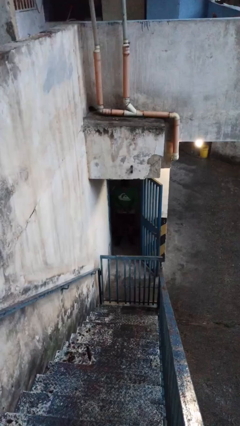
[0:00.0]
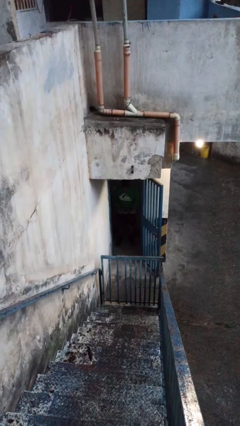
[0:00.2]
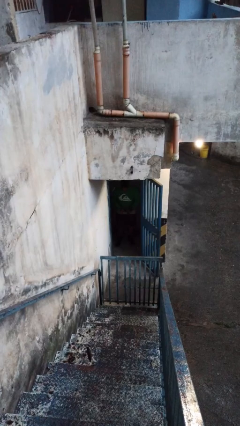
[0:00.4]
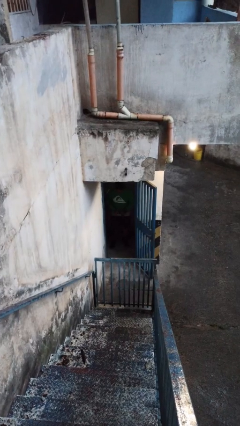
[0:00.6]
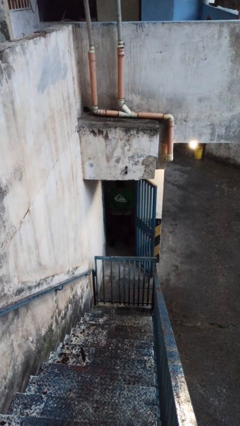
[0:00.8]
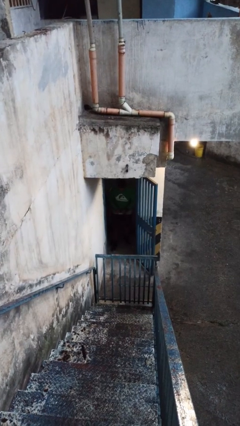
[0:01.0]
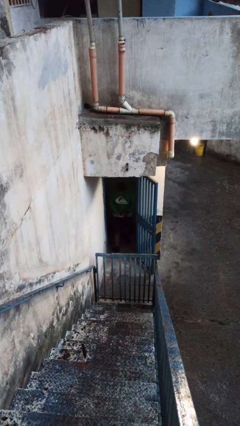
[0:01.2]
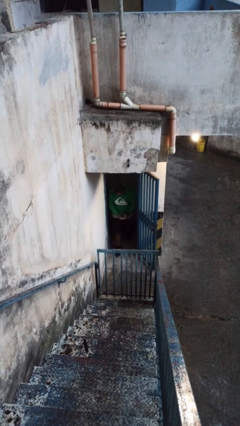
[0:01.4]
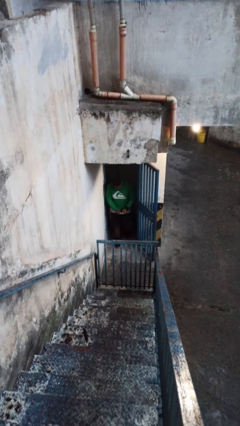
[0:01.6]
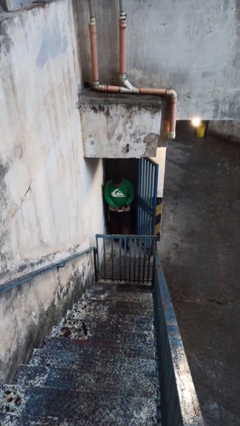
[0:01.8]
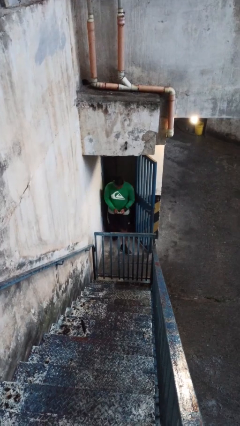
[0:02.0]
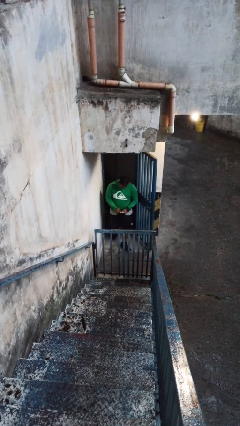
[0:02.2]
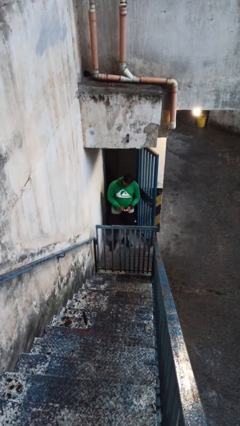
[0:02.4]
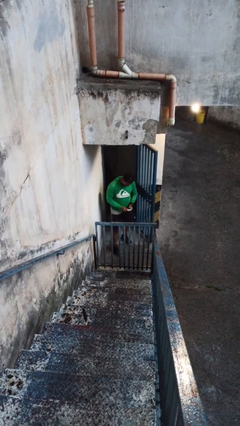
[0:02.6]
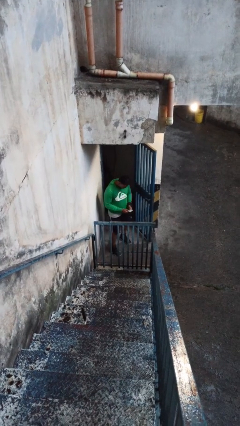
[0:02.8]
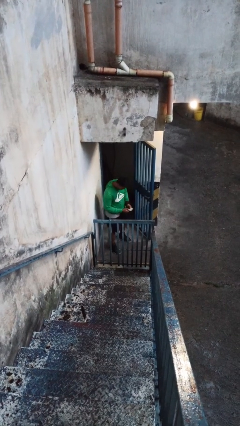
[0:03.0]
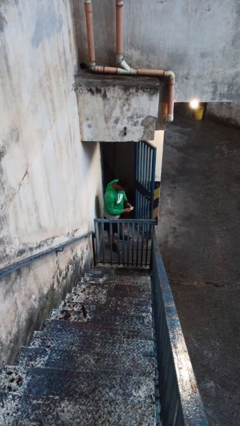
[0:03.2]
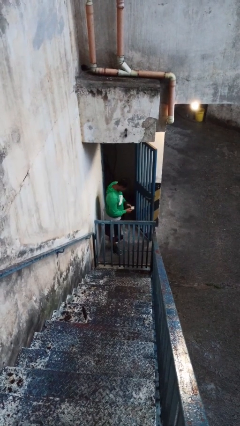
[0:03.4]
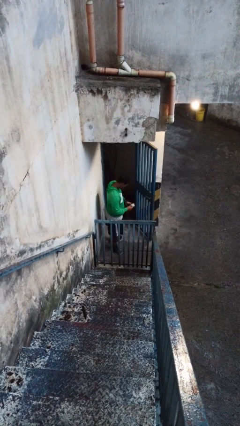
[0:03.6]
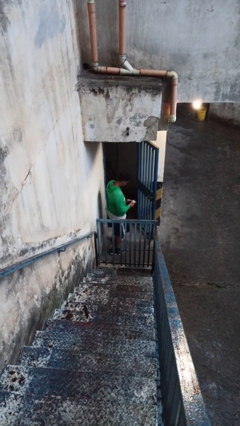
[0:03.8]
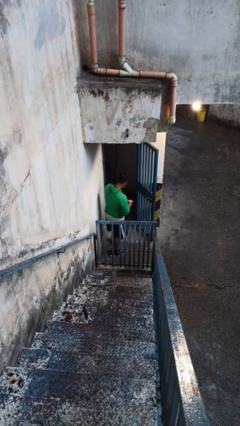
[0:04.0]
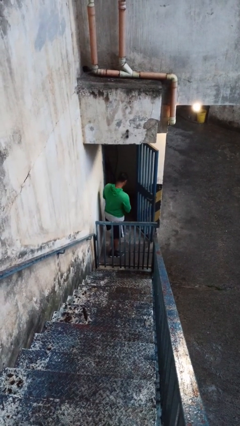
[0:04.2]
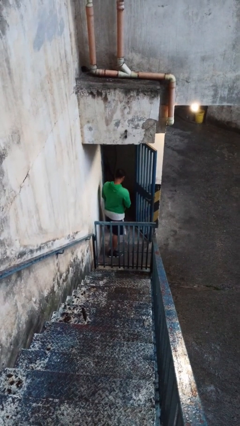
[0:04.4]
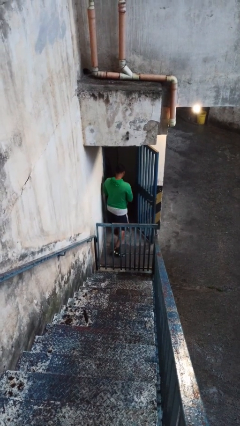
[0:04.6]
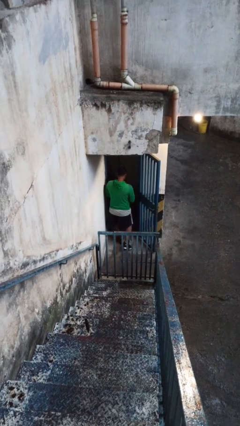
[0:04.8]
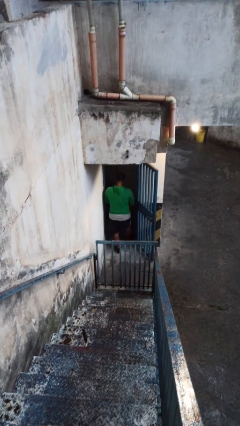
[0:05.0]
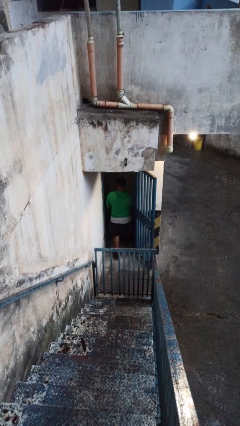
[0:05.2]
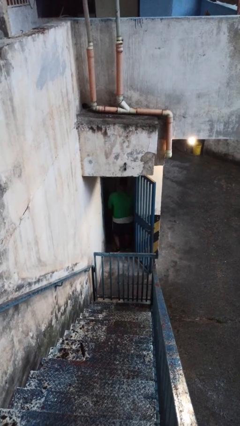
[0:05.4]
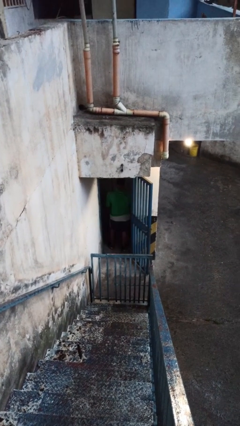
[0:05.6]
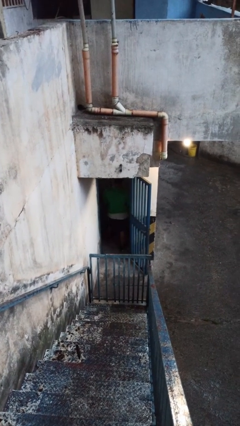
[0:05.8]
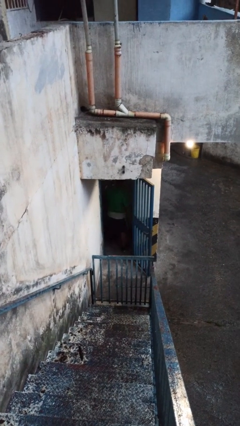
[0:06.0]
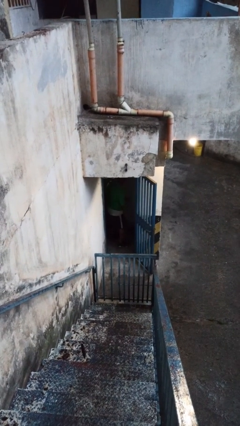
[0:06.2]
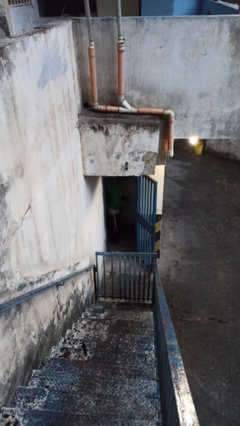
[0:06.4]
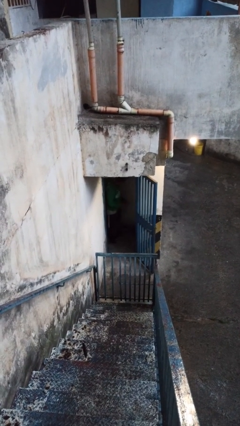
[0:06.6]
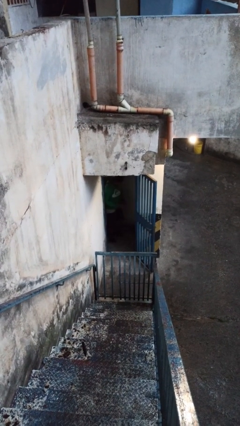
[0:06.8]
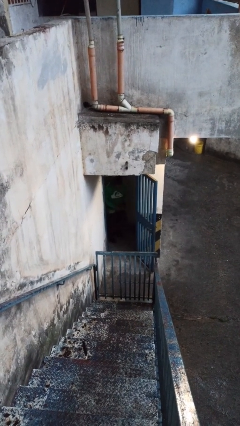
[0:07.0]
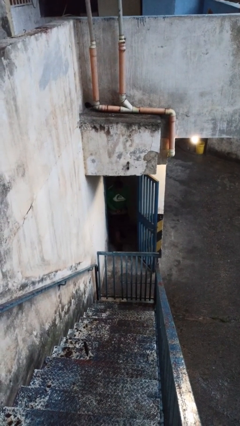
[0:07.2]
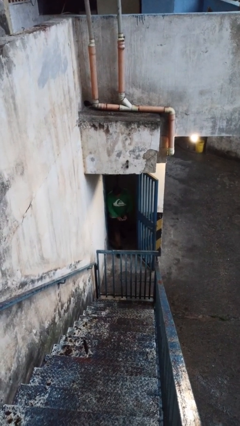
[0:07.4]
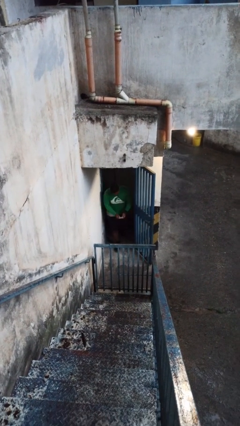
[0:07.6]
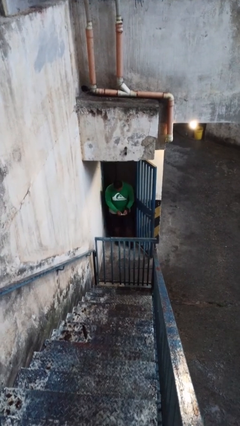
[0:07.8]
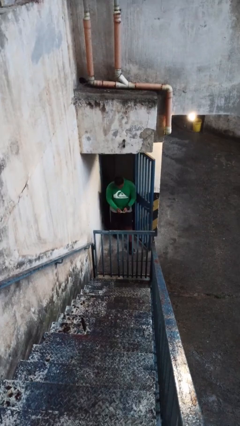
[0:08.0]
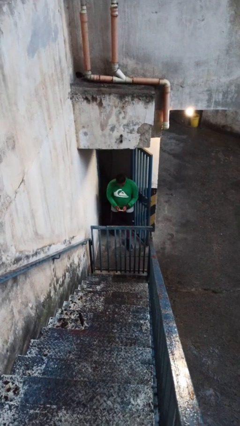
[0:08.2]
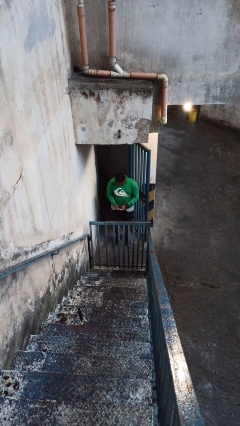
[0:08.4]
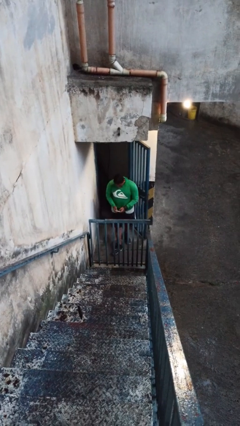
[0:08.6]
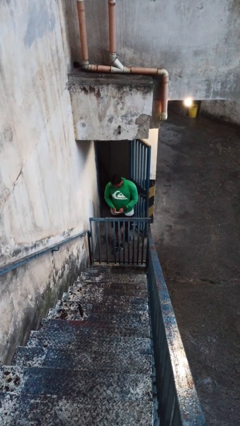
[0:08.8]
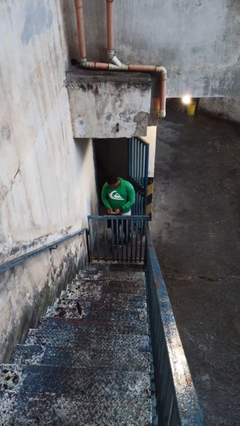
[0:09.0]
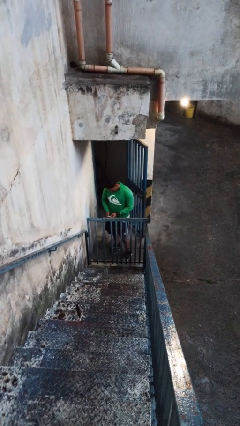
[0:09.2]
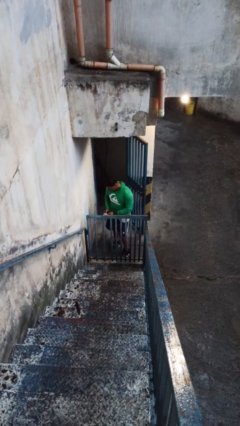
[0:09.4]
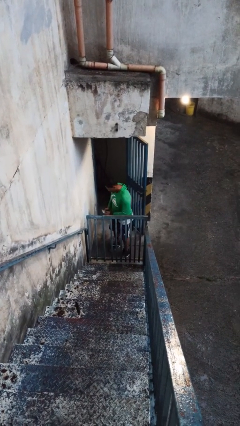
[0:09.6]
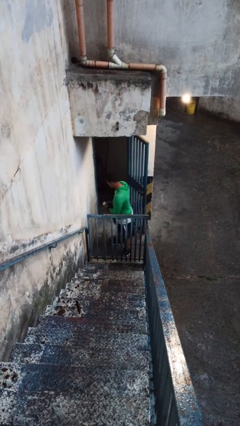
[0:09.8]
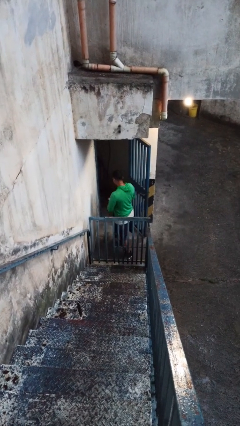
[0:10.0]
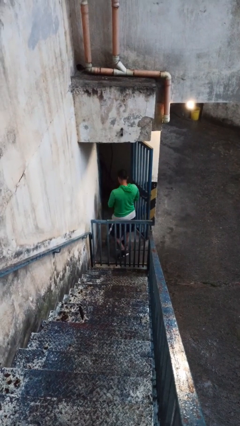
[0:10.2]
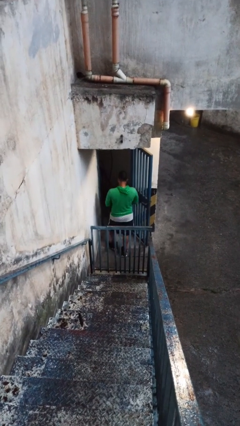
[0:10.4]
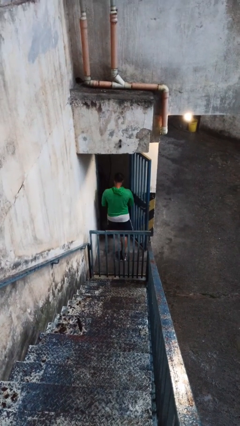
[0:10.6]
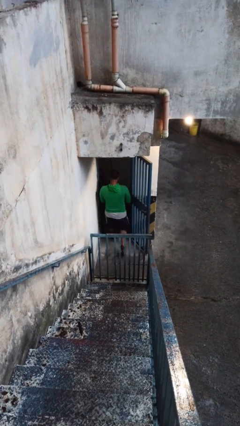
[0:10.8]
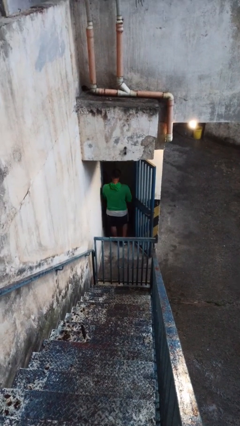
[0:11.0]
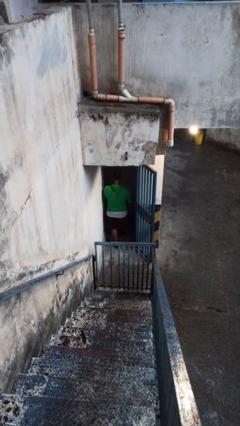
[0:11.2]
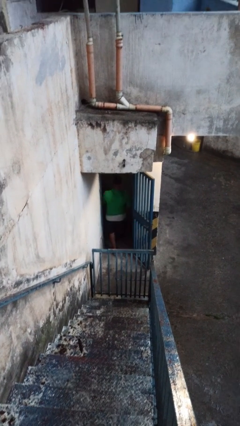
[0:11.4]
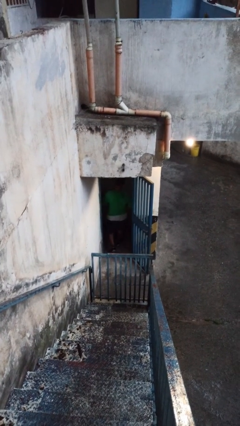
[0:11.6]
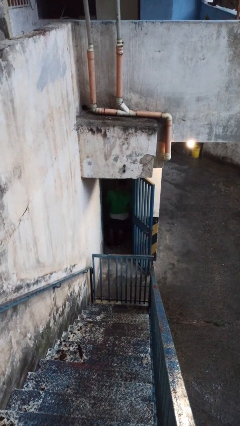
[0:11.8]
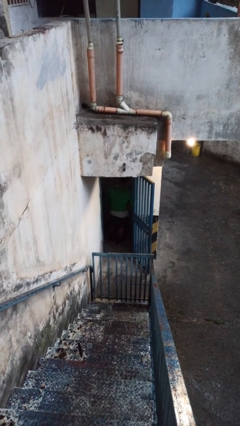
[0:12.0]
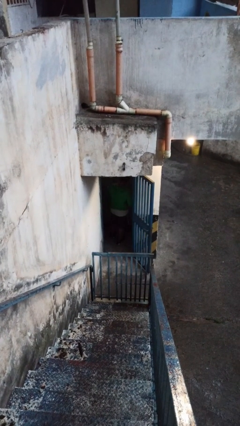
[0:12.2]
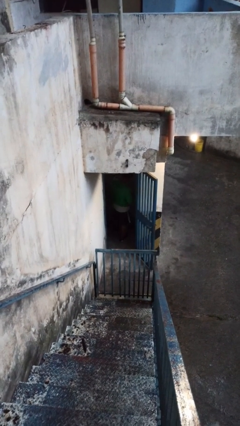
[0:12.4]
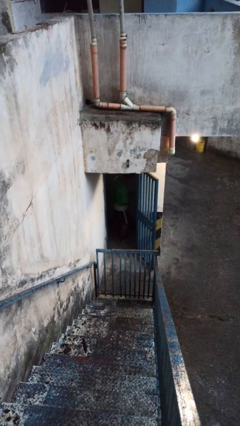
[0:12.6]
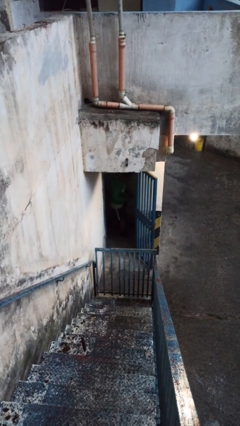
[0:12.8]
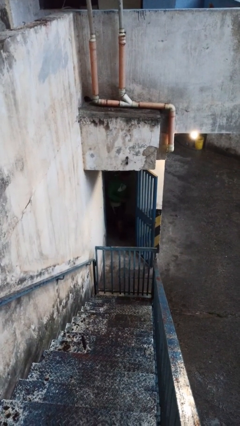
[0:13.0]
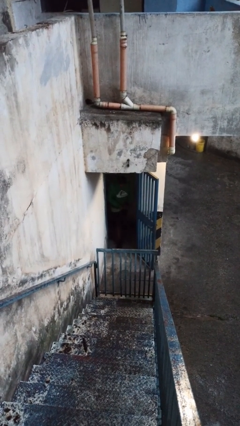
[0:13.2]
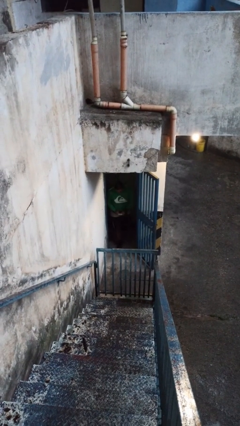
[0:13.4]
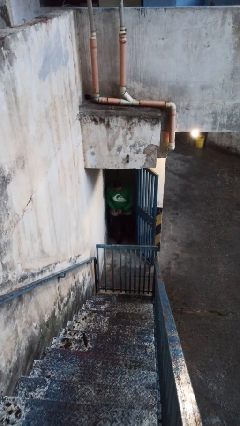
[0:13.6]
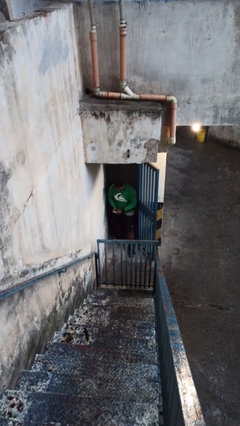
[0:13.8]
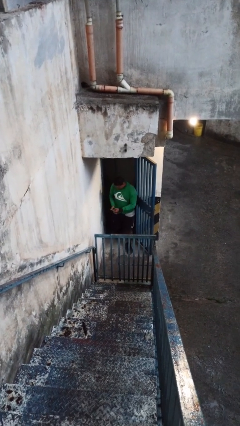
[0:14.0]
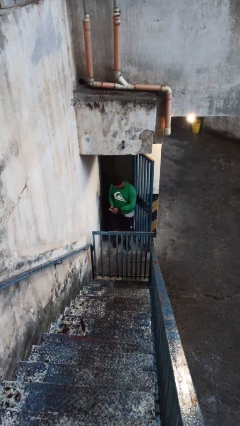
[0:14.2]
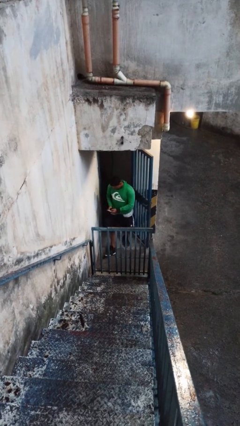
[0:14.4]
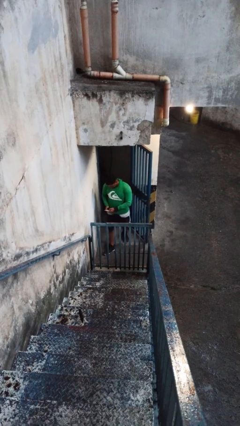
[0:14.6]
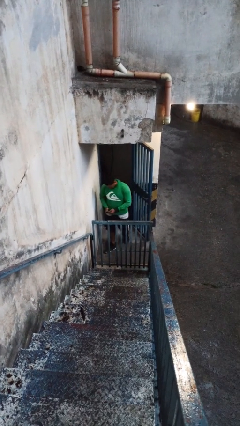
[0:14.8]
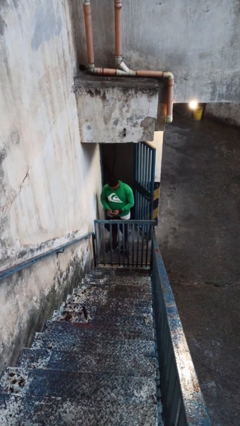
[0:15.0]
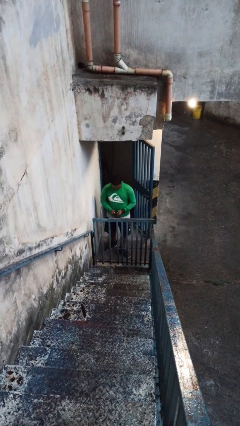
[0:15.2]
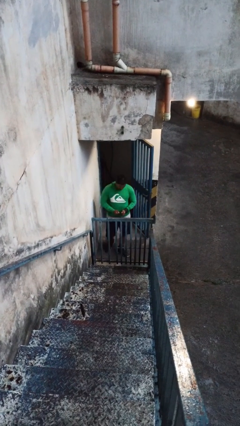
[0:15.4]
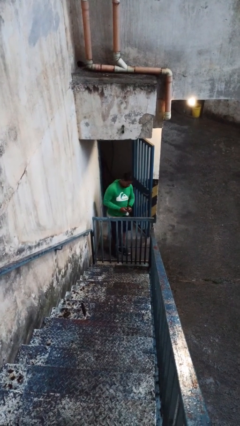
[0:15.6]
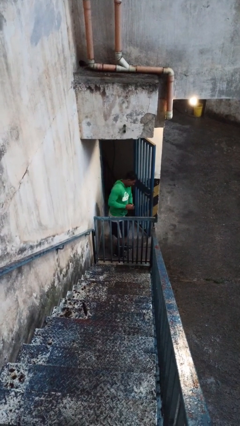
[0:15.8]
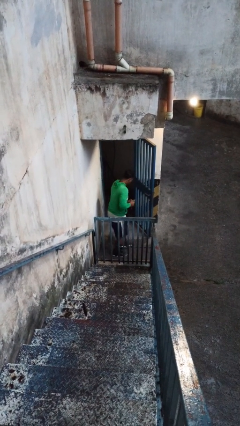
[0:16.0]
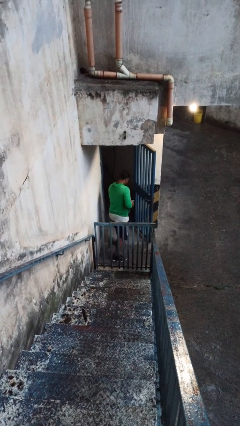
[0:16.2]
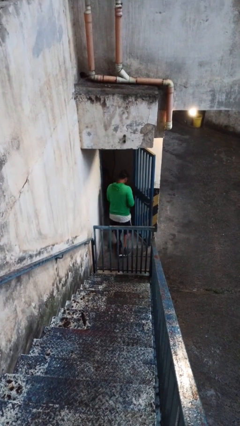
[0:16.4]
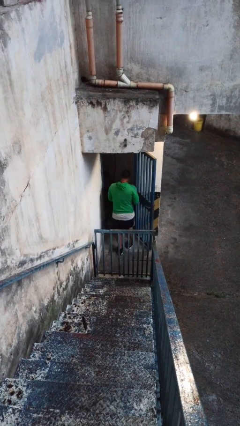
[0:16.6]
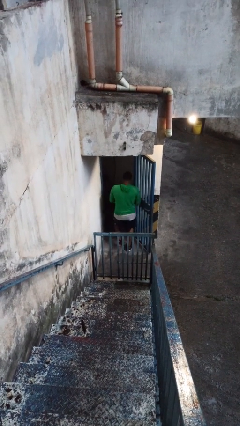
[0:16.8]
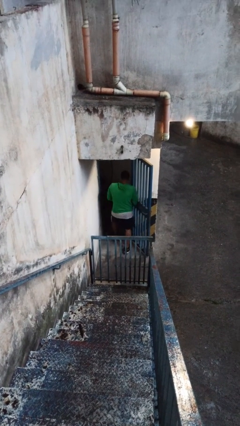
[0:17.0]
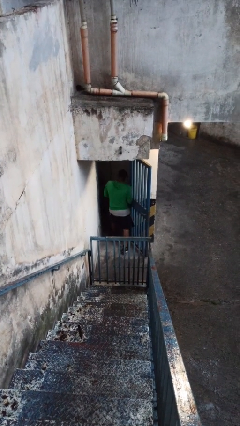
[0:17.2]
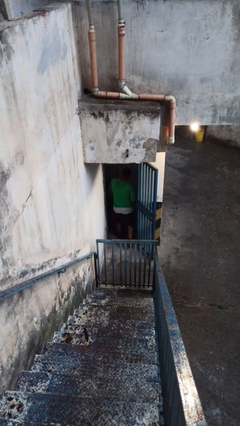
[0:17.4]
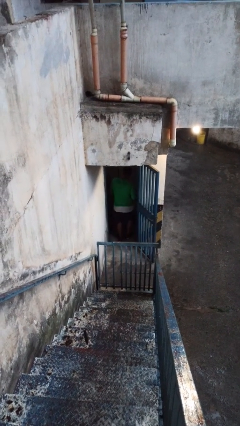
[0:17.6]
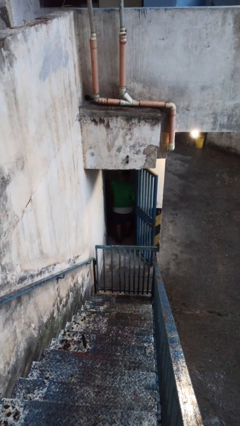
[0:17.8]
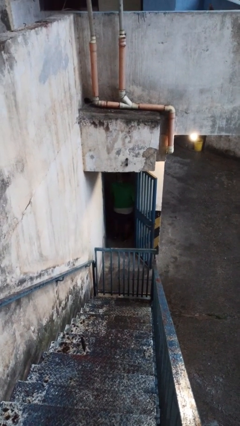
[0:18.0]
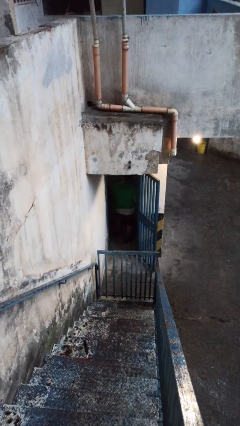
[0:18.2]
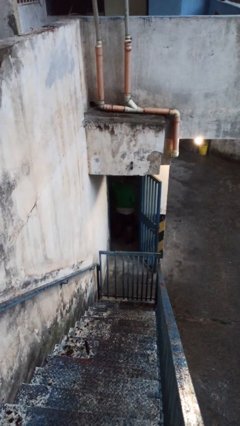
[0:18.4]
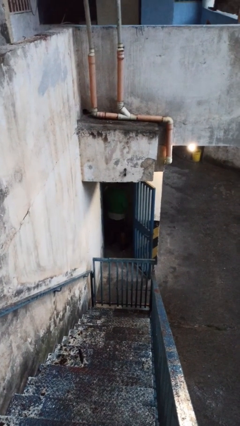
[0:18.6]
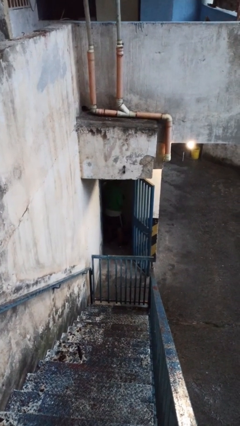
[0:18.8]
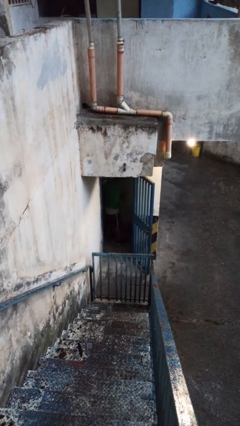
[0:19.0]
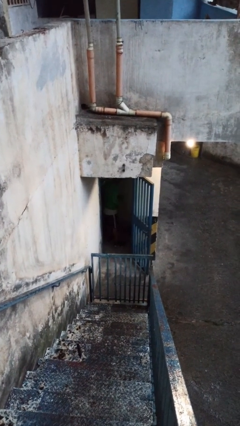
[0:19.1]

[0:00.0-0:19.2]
person texts on phone
